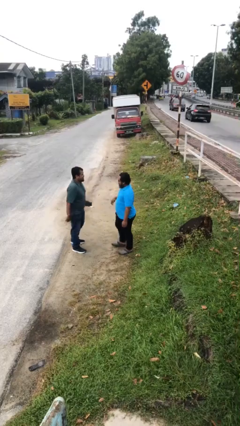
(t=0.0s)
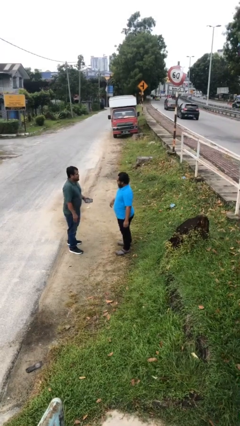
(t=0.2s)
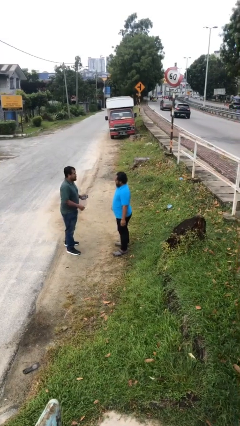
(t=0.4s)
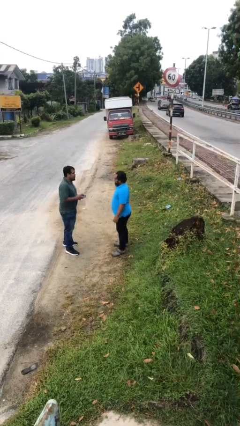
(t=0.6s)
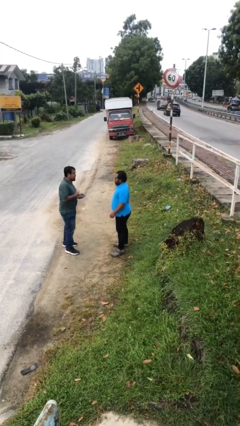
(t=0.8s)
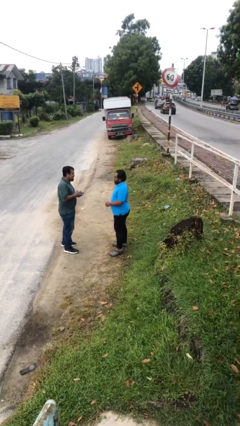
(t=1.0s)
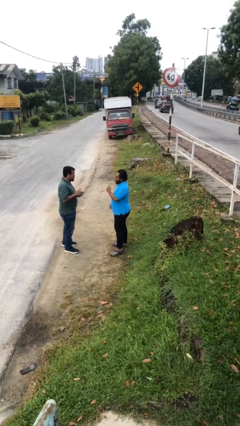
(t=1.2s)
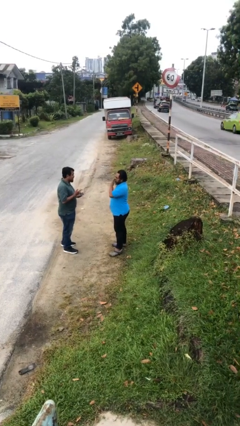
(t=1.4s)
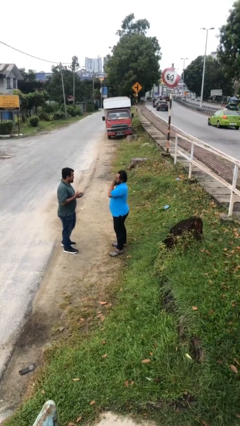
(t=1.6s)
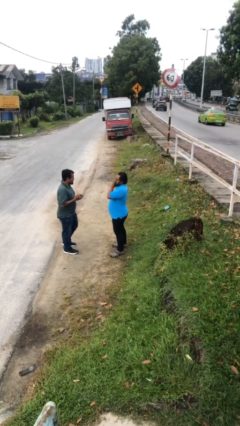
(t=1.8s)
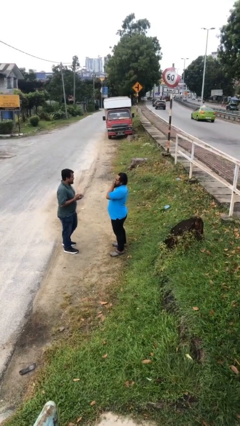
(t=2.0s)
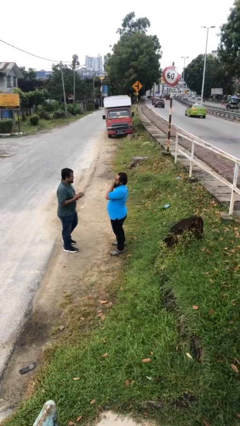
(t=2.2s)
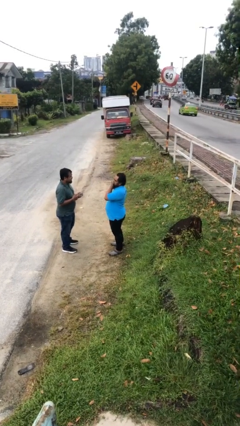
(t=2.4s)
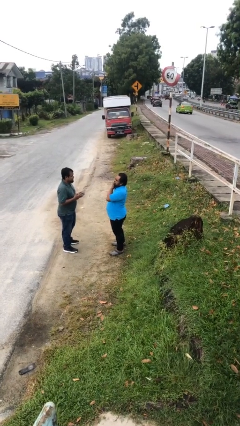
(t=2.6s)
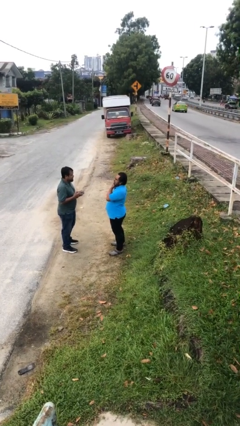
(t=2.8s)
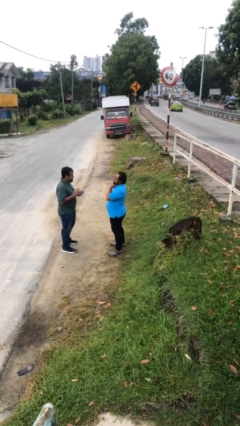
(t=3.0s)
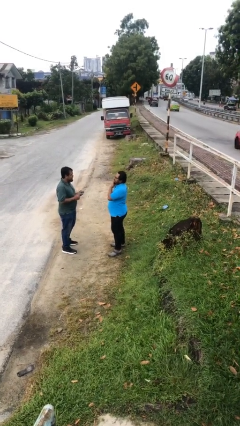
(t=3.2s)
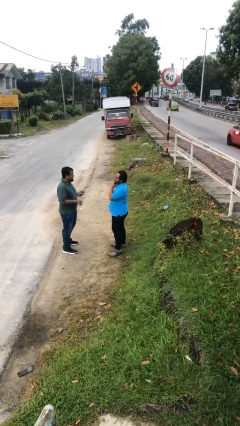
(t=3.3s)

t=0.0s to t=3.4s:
person talks to person

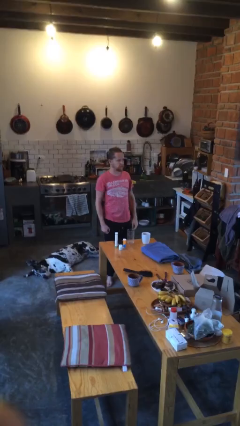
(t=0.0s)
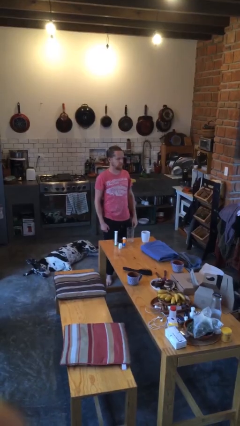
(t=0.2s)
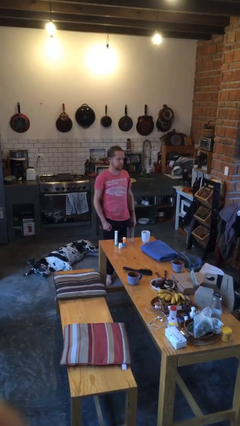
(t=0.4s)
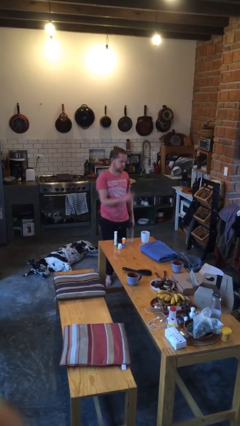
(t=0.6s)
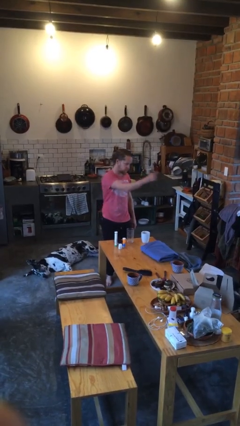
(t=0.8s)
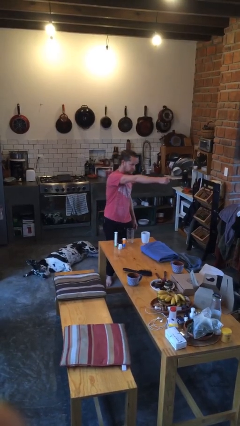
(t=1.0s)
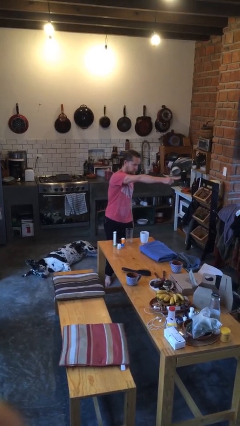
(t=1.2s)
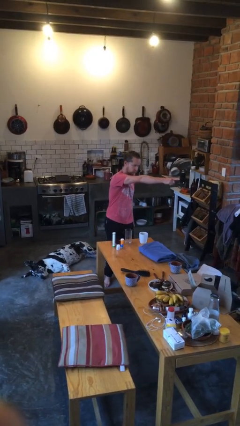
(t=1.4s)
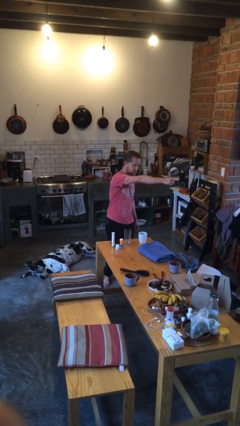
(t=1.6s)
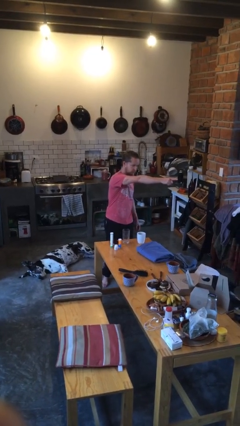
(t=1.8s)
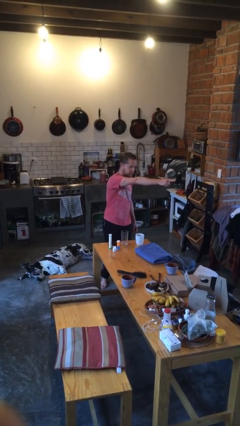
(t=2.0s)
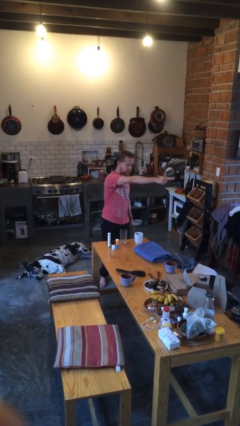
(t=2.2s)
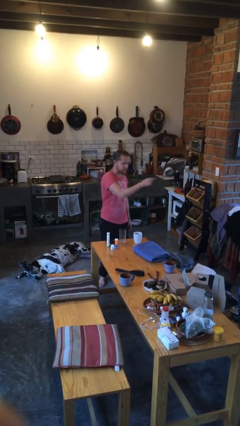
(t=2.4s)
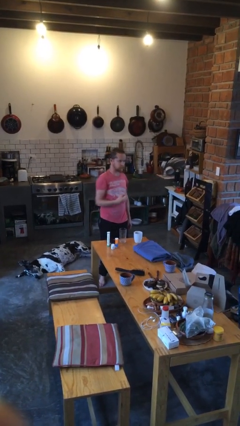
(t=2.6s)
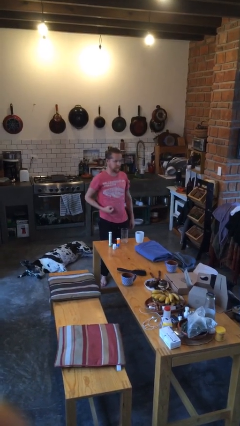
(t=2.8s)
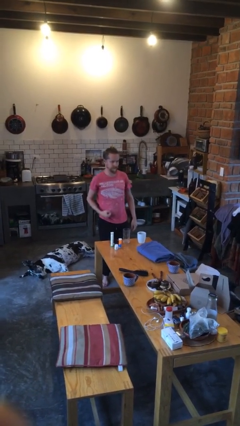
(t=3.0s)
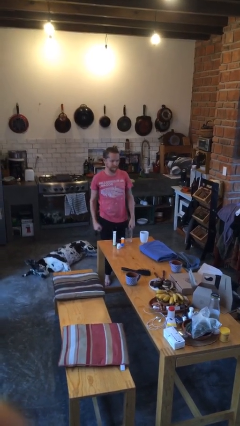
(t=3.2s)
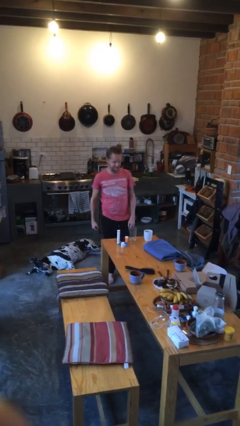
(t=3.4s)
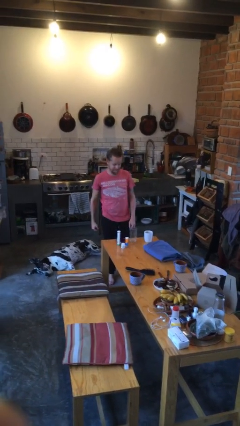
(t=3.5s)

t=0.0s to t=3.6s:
person points at person

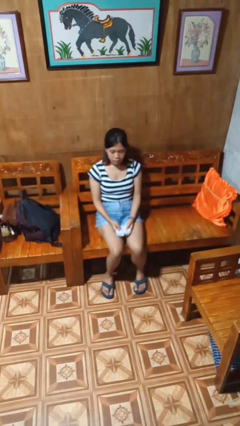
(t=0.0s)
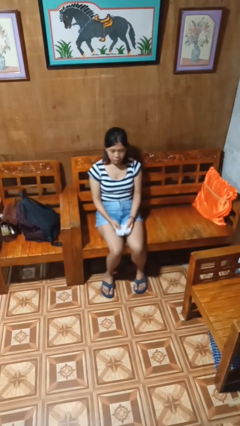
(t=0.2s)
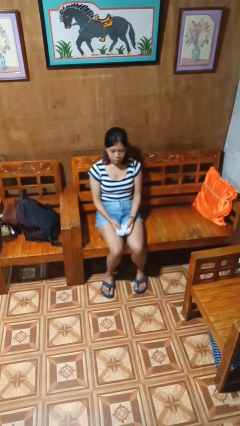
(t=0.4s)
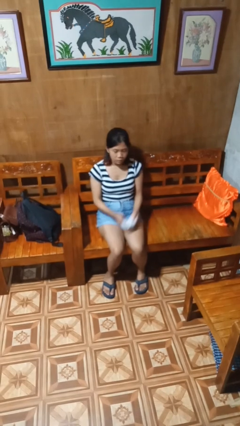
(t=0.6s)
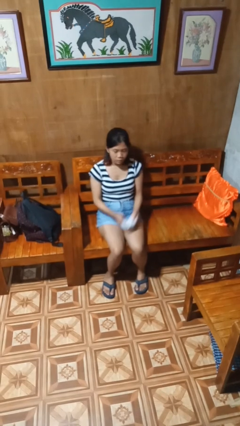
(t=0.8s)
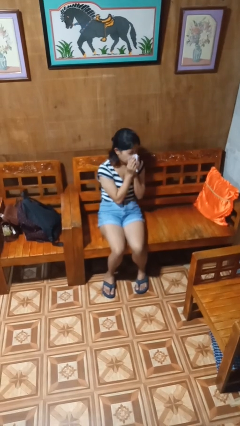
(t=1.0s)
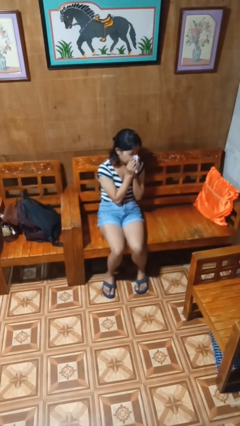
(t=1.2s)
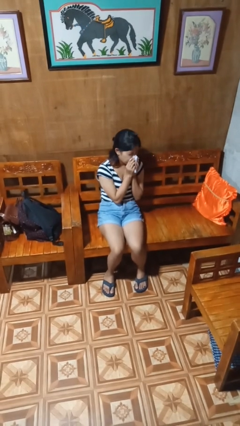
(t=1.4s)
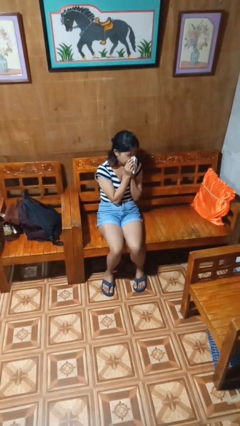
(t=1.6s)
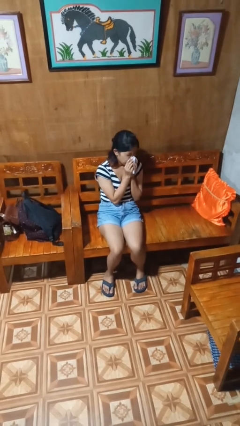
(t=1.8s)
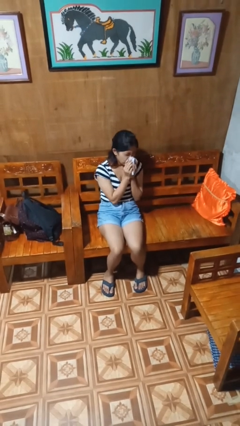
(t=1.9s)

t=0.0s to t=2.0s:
person blows nose

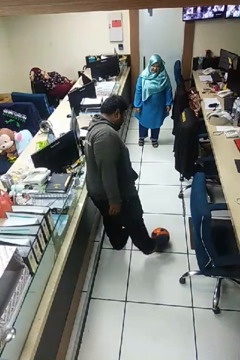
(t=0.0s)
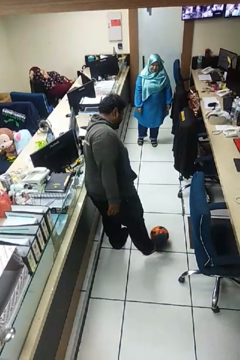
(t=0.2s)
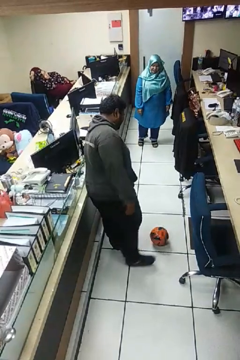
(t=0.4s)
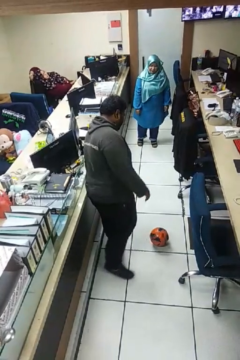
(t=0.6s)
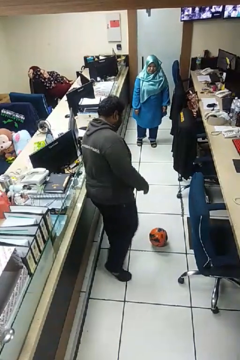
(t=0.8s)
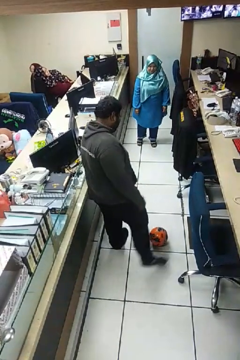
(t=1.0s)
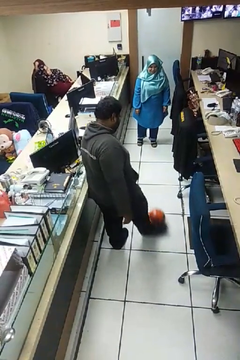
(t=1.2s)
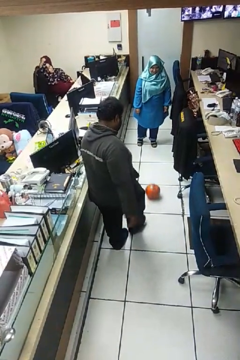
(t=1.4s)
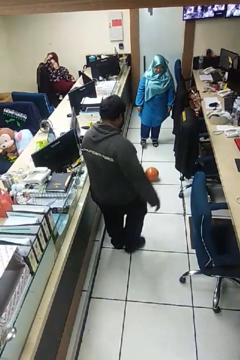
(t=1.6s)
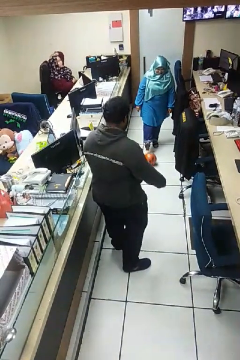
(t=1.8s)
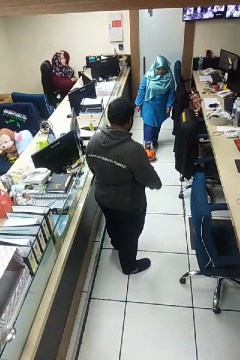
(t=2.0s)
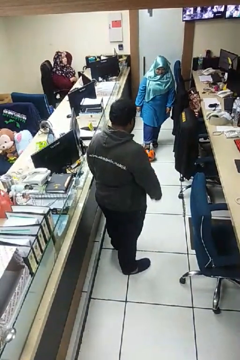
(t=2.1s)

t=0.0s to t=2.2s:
person kicks object to person

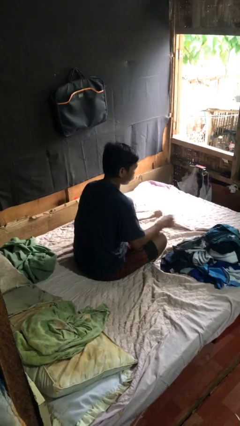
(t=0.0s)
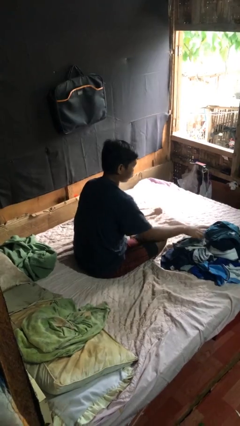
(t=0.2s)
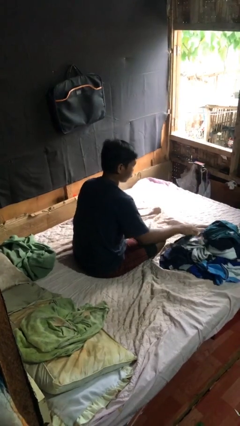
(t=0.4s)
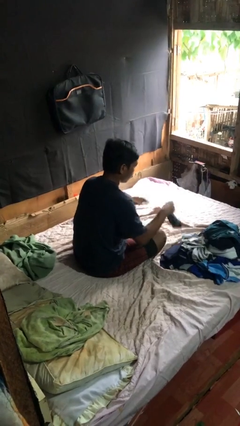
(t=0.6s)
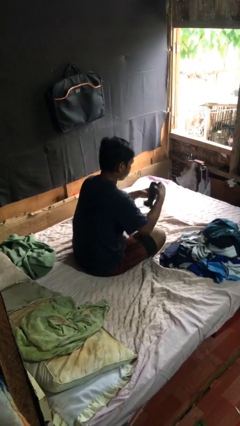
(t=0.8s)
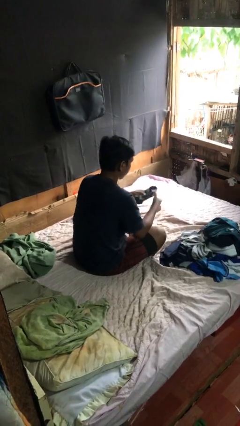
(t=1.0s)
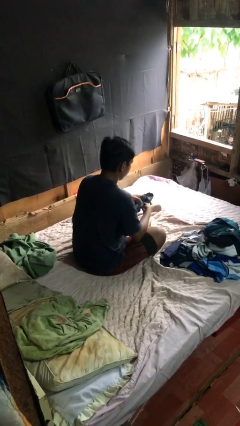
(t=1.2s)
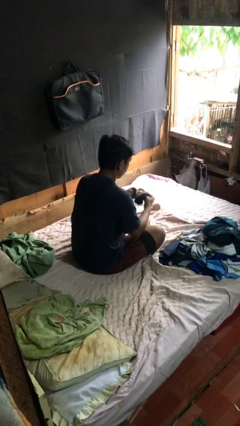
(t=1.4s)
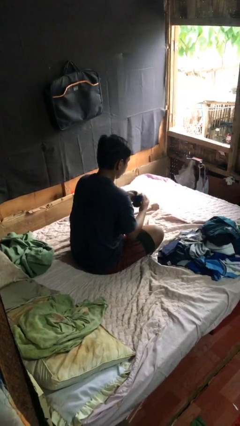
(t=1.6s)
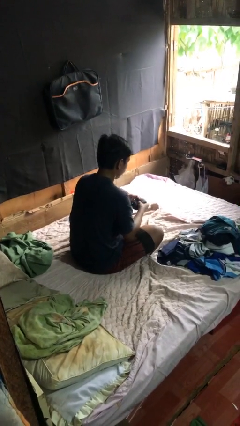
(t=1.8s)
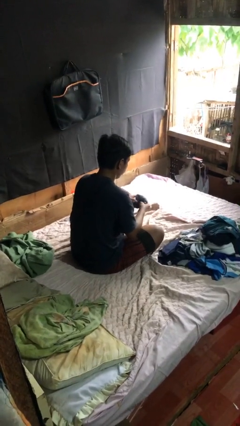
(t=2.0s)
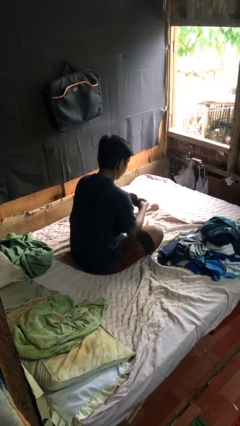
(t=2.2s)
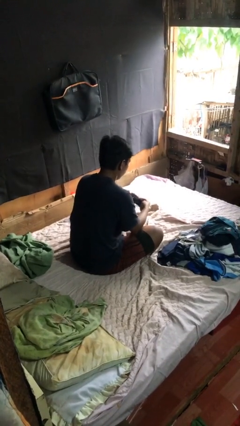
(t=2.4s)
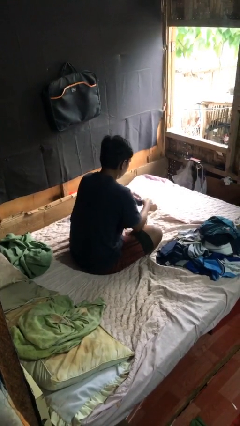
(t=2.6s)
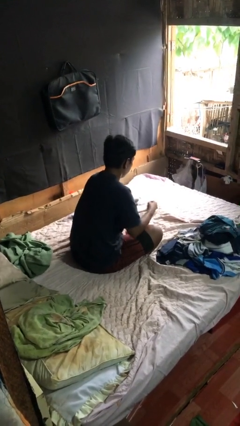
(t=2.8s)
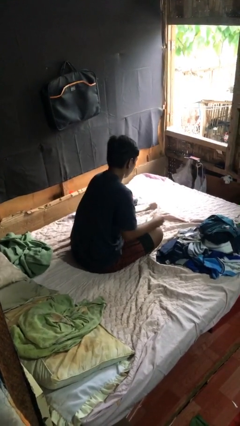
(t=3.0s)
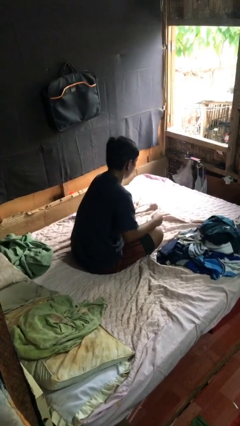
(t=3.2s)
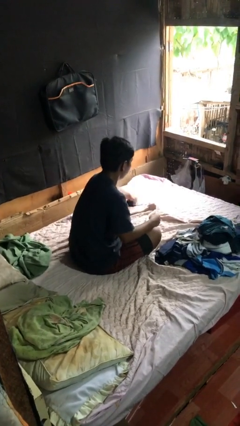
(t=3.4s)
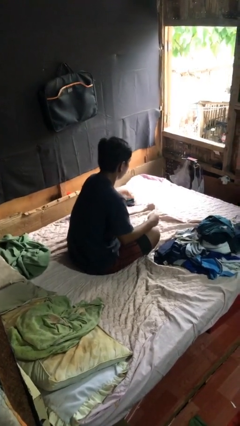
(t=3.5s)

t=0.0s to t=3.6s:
person folds socks

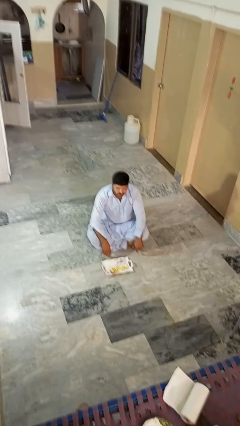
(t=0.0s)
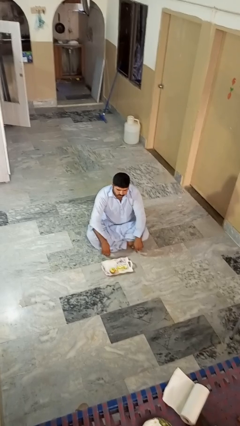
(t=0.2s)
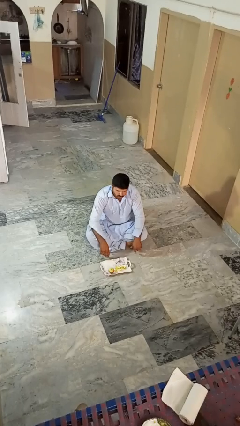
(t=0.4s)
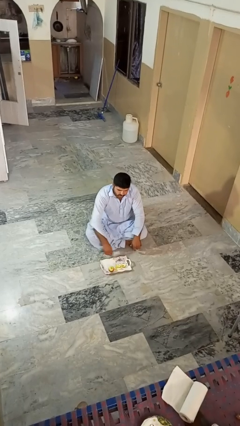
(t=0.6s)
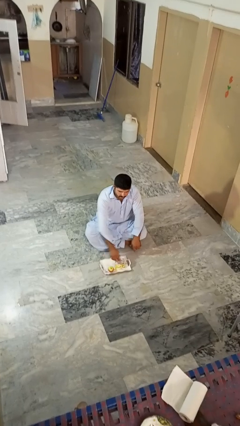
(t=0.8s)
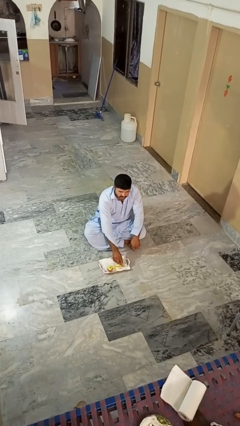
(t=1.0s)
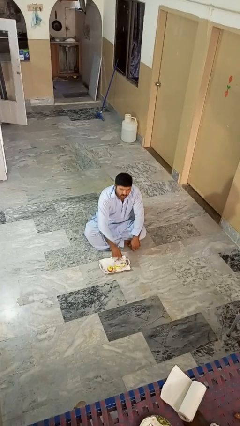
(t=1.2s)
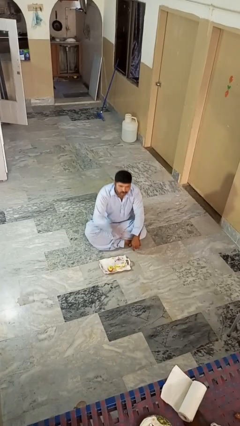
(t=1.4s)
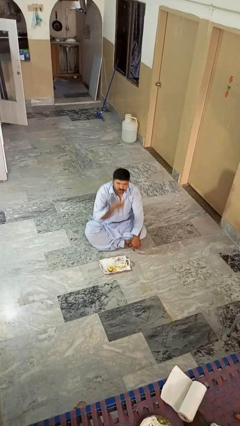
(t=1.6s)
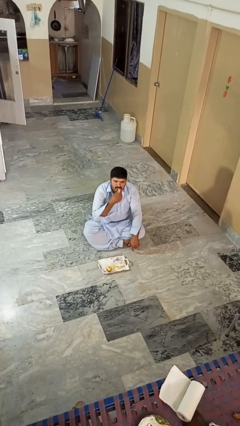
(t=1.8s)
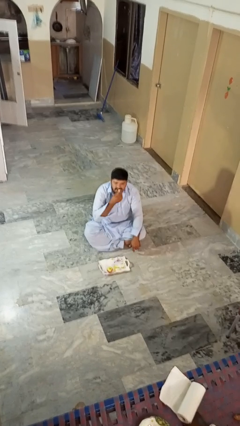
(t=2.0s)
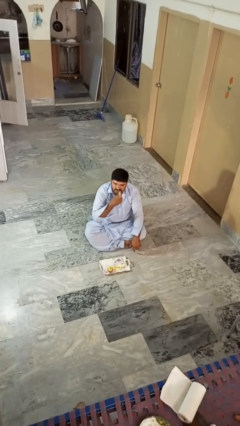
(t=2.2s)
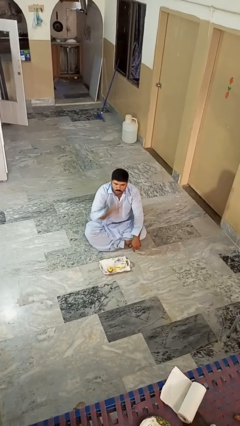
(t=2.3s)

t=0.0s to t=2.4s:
person eats apple

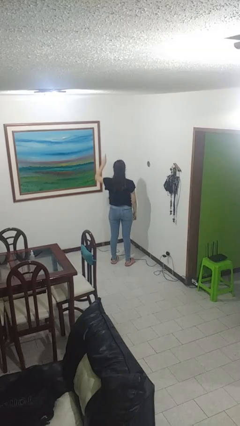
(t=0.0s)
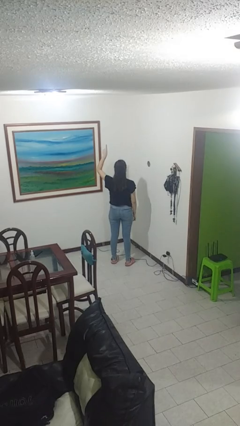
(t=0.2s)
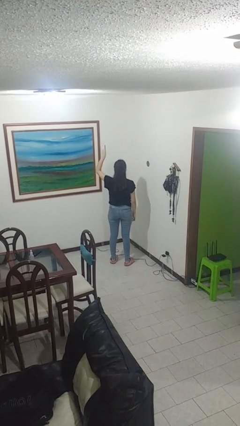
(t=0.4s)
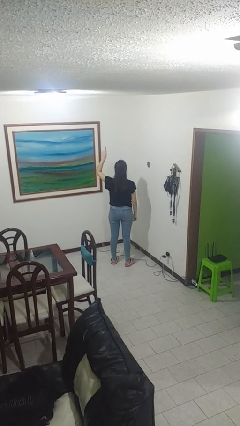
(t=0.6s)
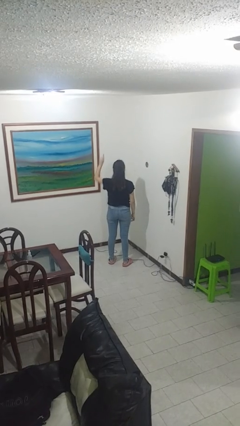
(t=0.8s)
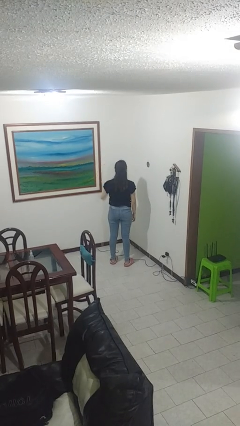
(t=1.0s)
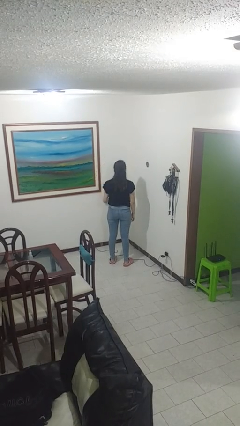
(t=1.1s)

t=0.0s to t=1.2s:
person gestures number one
